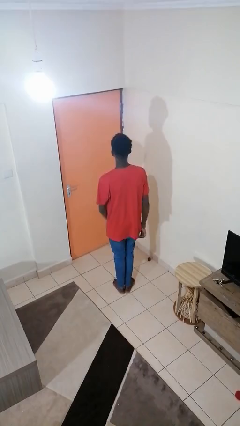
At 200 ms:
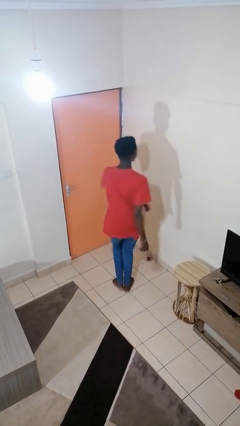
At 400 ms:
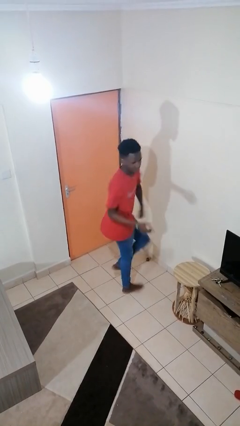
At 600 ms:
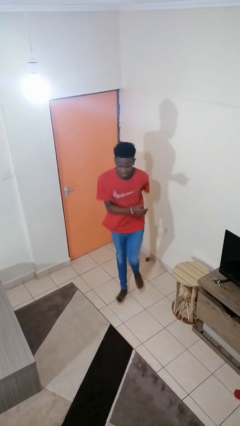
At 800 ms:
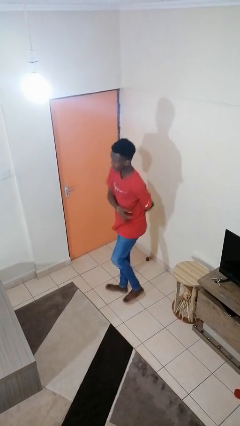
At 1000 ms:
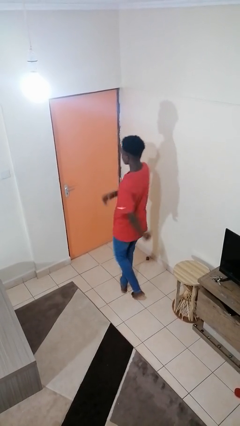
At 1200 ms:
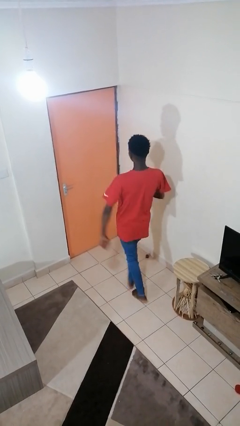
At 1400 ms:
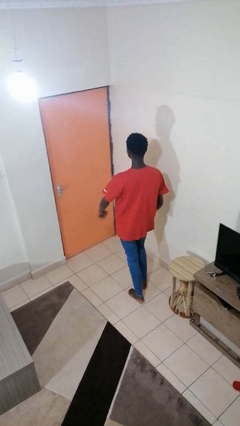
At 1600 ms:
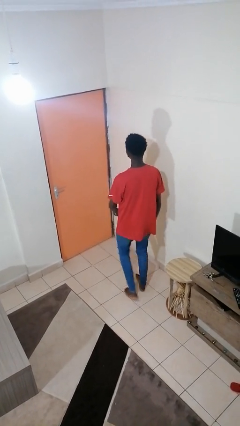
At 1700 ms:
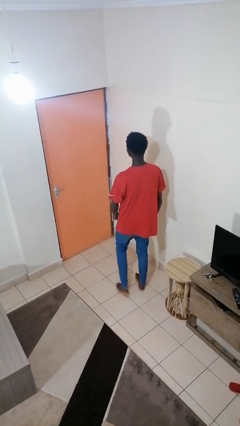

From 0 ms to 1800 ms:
person twirls

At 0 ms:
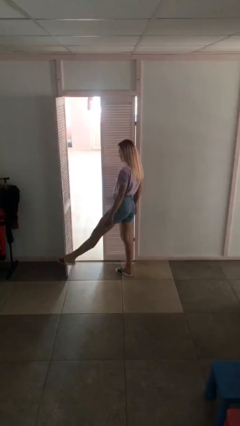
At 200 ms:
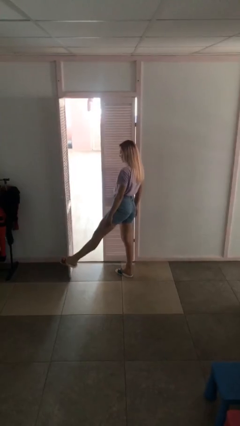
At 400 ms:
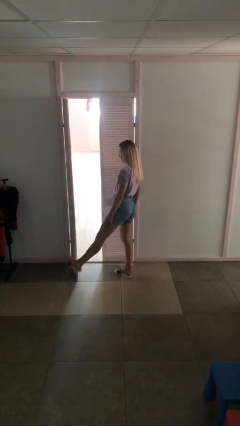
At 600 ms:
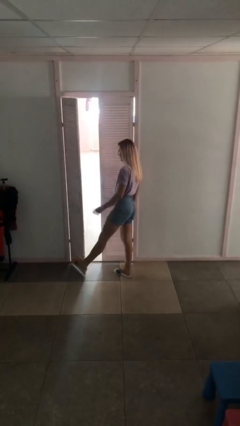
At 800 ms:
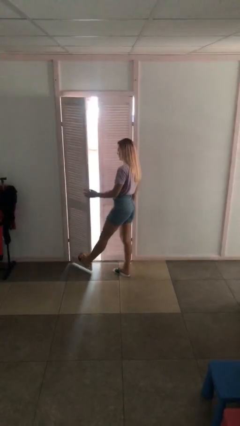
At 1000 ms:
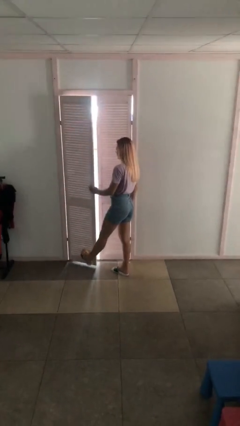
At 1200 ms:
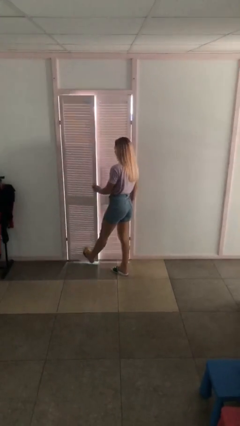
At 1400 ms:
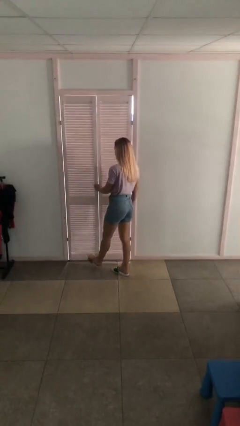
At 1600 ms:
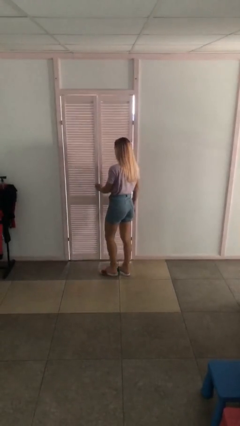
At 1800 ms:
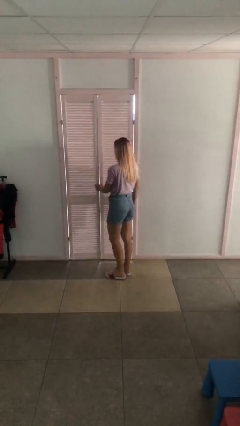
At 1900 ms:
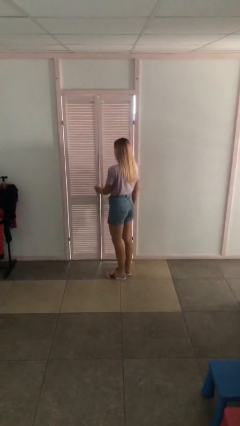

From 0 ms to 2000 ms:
person closes door with foot

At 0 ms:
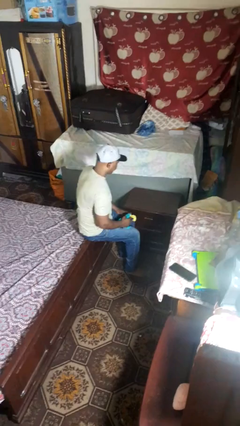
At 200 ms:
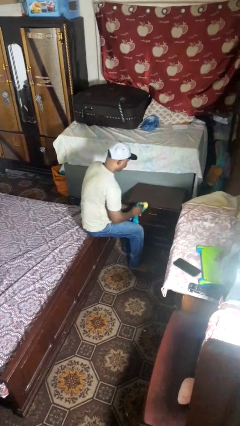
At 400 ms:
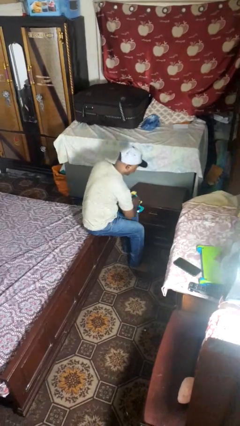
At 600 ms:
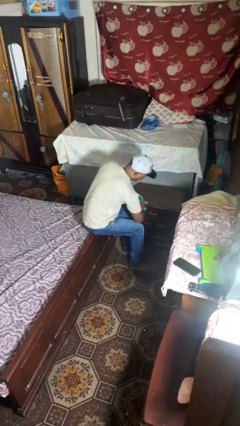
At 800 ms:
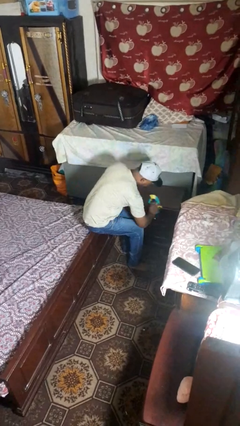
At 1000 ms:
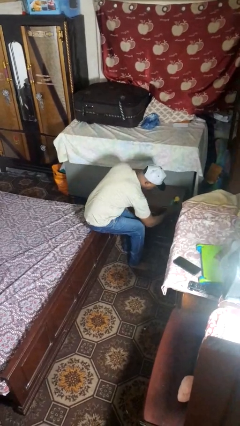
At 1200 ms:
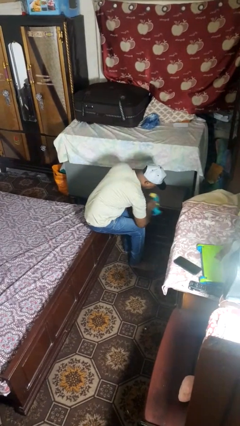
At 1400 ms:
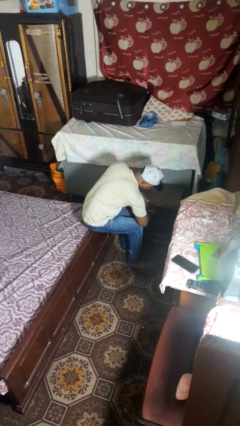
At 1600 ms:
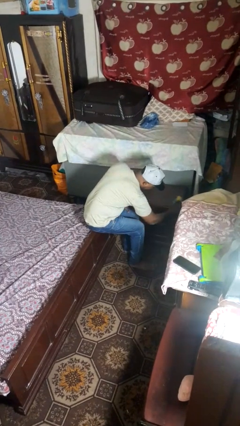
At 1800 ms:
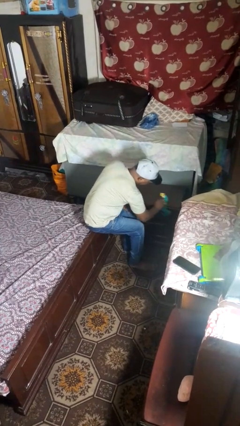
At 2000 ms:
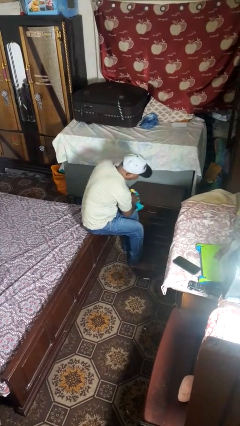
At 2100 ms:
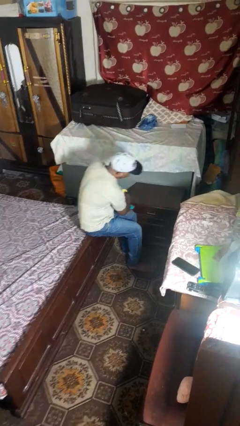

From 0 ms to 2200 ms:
person cleans table with rag

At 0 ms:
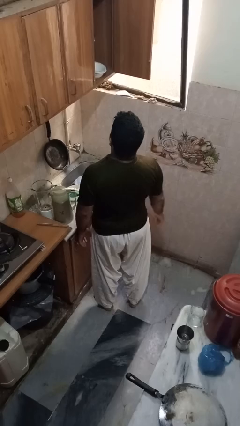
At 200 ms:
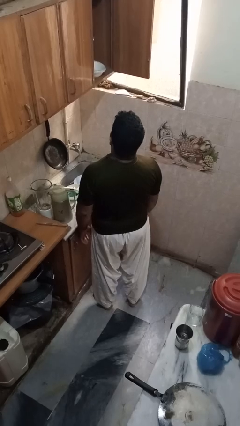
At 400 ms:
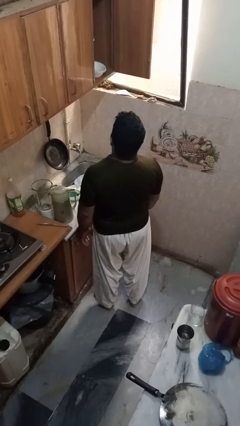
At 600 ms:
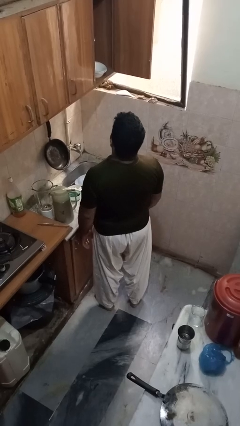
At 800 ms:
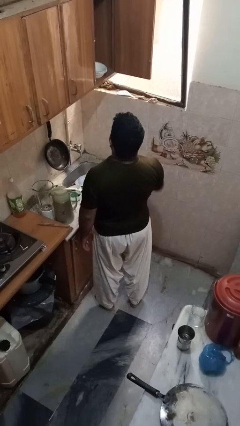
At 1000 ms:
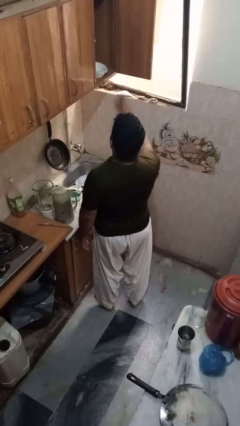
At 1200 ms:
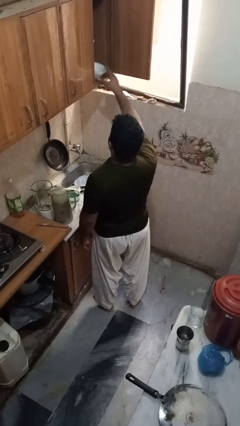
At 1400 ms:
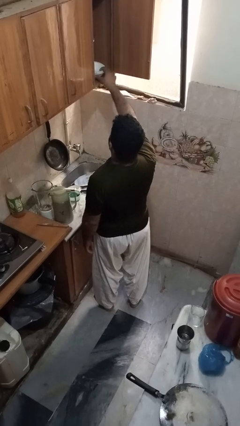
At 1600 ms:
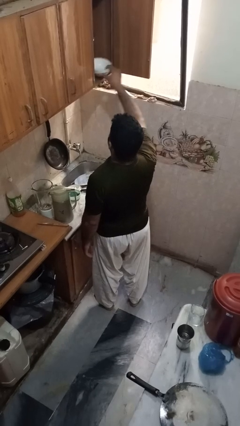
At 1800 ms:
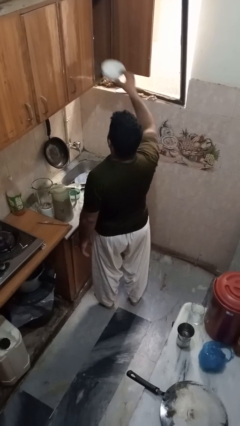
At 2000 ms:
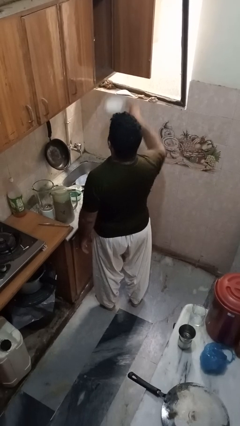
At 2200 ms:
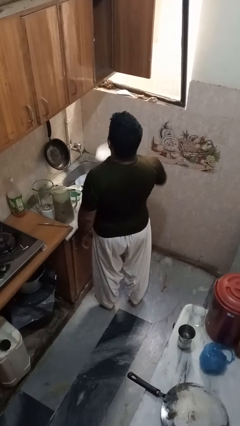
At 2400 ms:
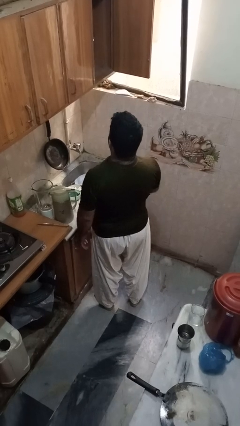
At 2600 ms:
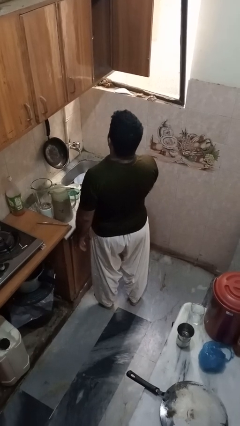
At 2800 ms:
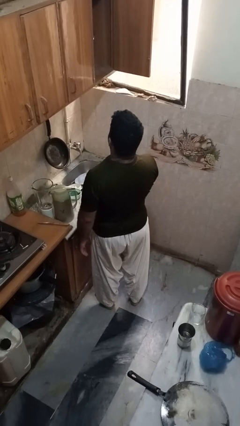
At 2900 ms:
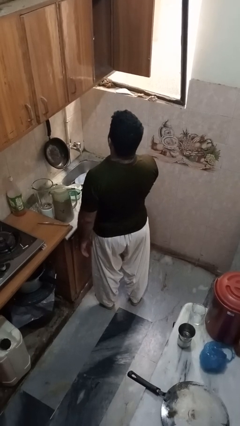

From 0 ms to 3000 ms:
person takes object from cabinet

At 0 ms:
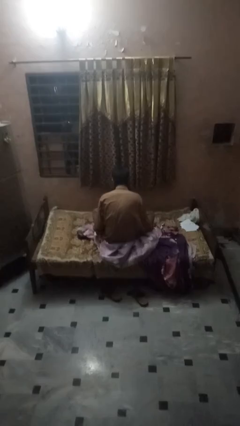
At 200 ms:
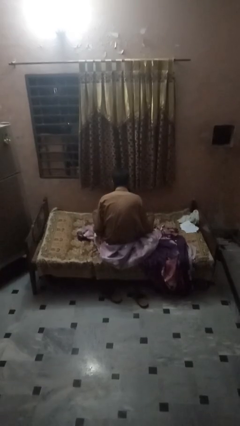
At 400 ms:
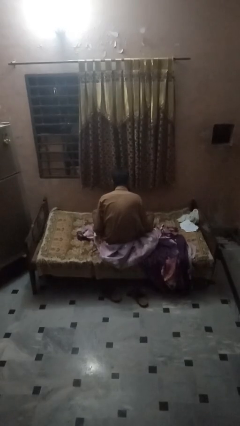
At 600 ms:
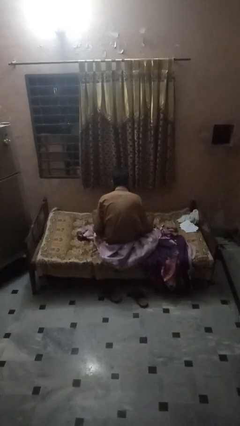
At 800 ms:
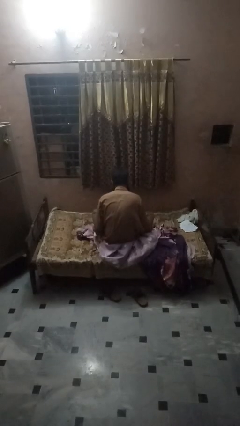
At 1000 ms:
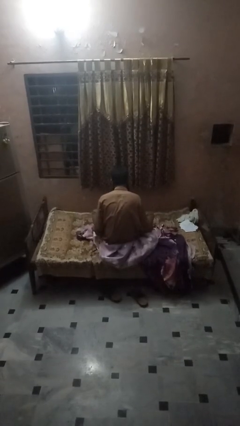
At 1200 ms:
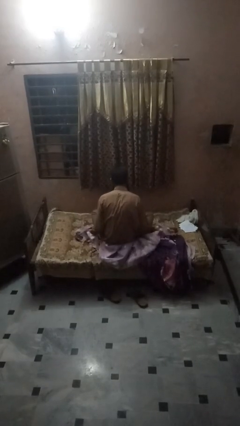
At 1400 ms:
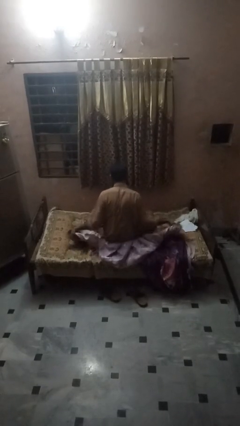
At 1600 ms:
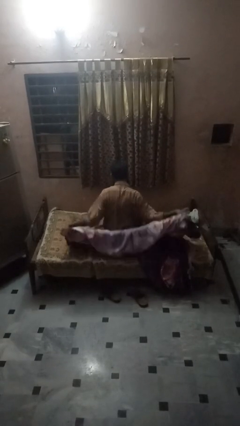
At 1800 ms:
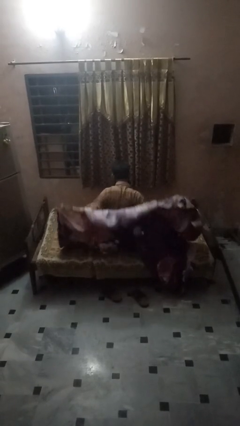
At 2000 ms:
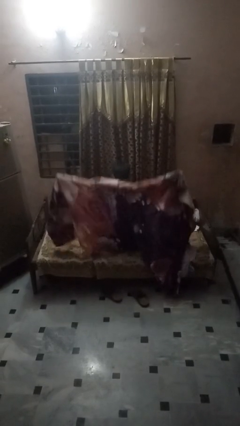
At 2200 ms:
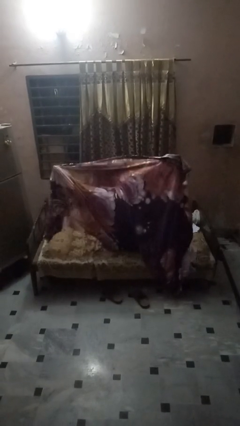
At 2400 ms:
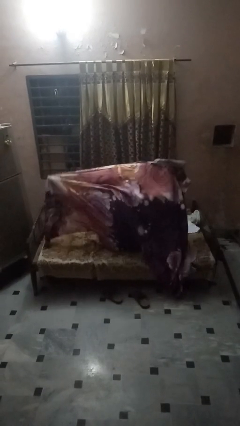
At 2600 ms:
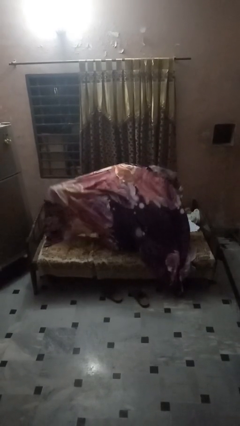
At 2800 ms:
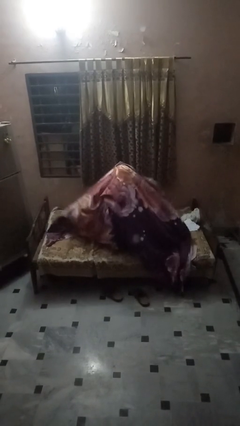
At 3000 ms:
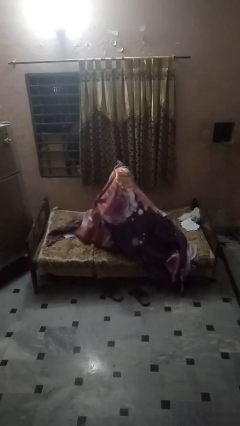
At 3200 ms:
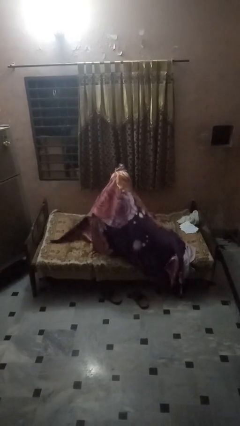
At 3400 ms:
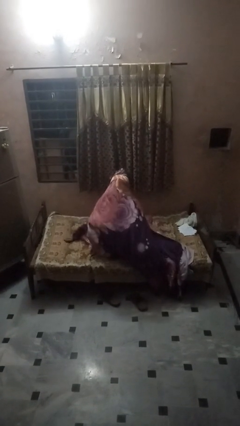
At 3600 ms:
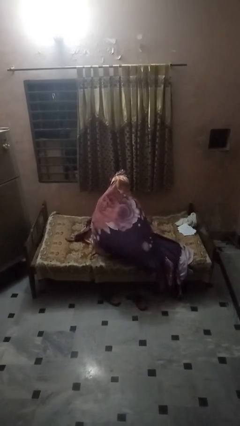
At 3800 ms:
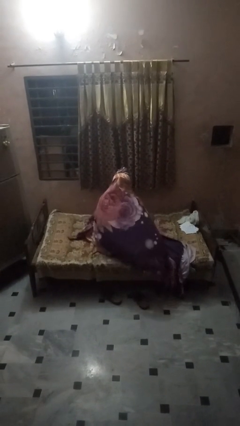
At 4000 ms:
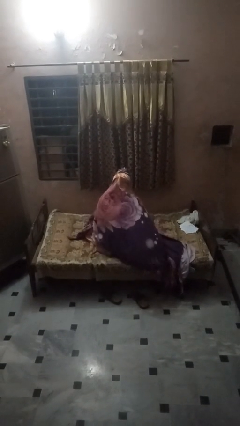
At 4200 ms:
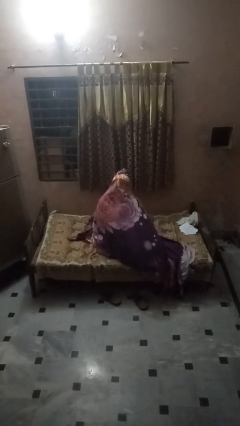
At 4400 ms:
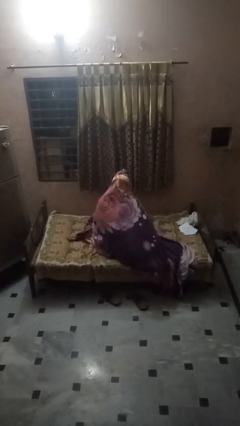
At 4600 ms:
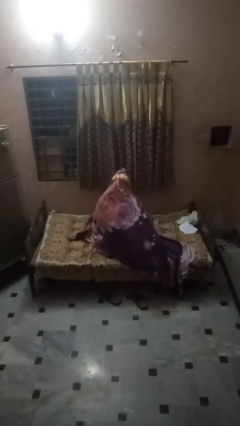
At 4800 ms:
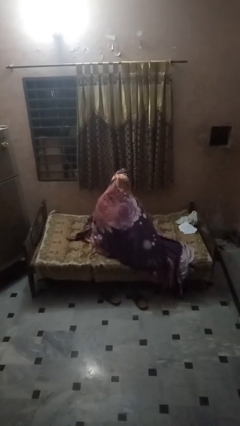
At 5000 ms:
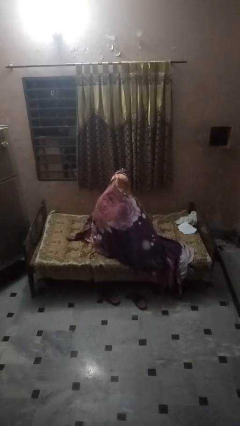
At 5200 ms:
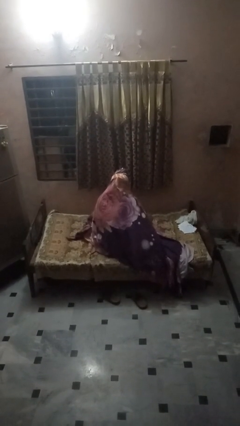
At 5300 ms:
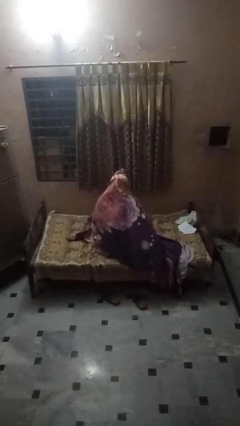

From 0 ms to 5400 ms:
person covers with bedsheets

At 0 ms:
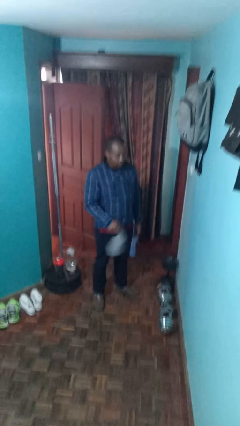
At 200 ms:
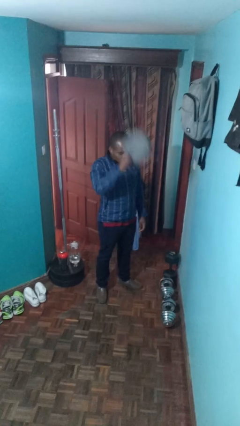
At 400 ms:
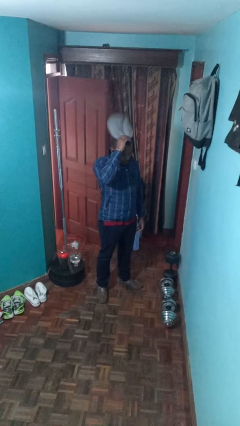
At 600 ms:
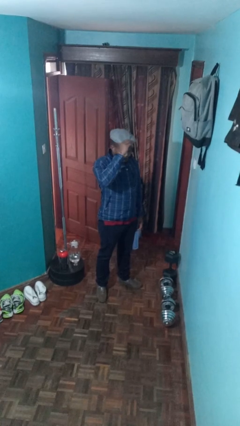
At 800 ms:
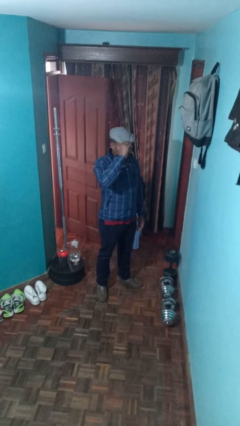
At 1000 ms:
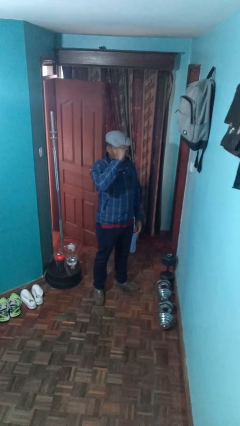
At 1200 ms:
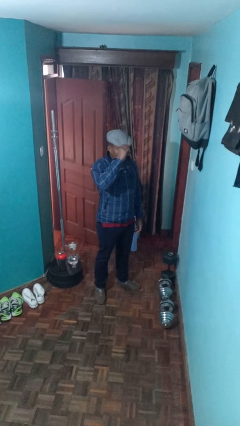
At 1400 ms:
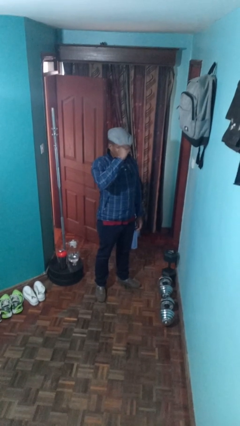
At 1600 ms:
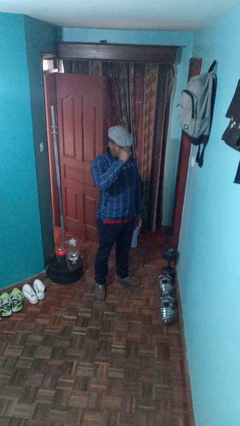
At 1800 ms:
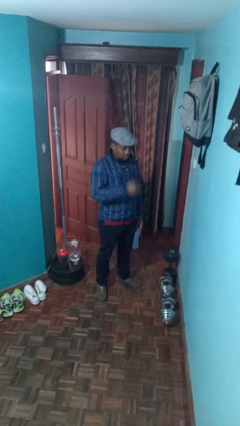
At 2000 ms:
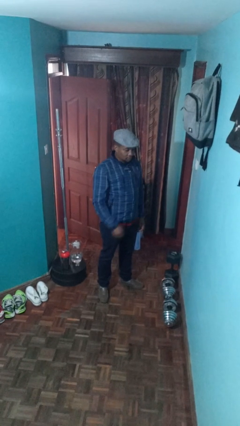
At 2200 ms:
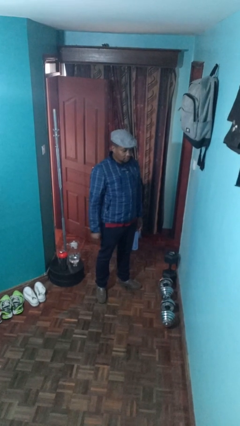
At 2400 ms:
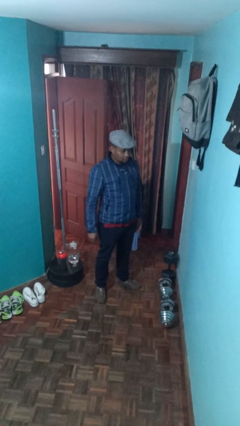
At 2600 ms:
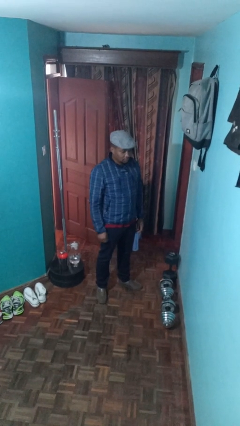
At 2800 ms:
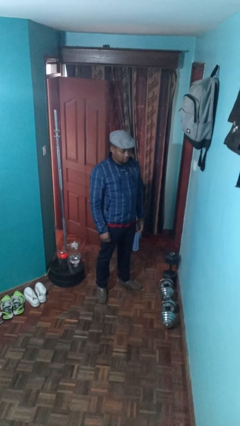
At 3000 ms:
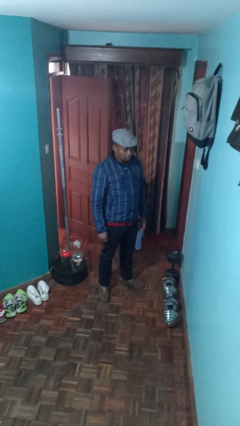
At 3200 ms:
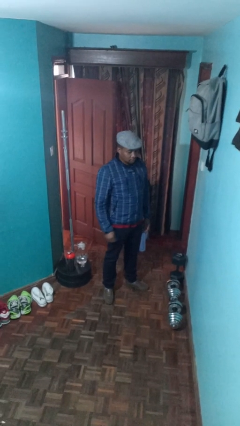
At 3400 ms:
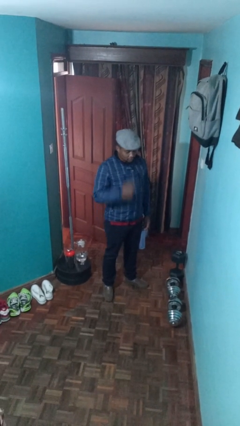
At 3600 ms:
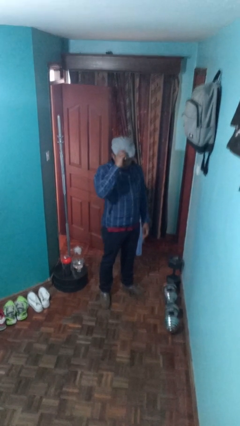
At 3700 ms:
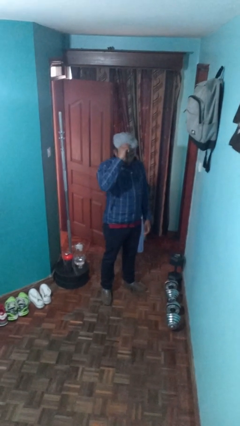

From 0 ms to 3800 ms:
person puts on hat
